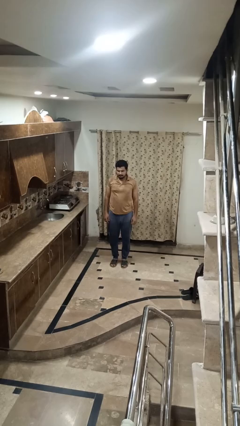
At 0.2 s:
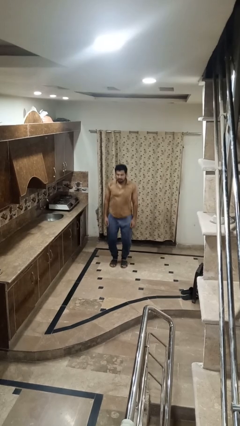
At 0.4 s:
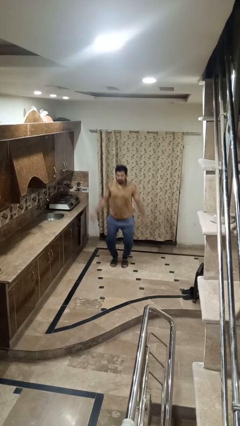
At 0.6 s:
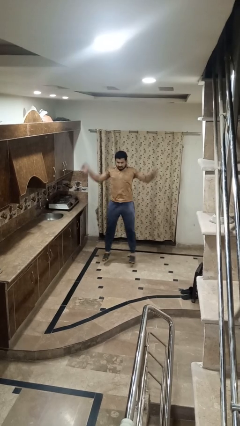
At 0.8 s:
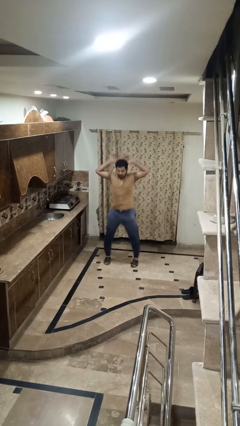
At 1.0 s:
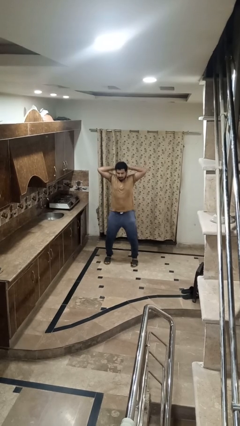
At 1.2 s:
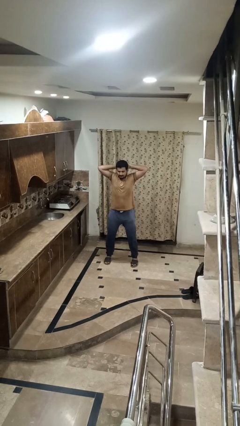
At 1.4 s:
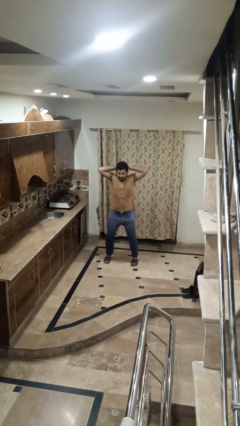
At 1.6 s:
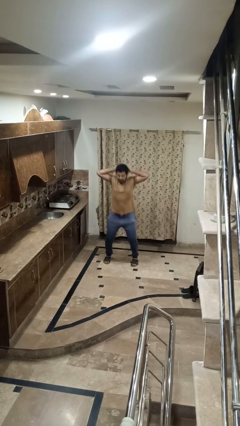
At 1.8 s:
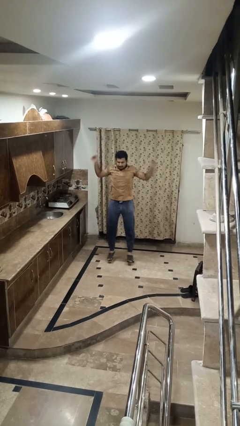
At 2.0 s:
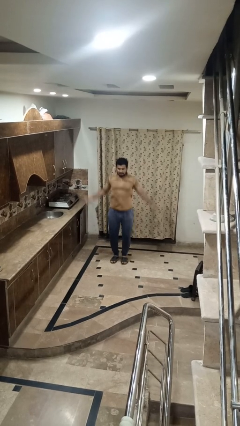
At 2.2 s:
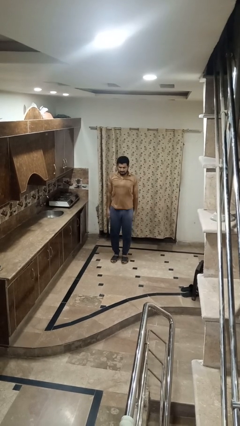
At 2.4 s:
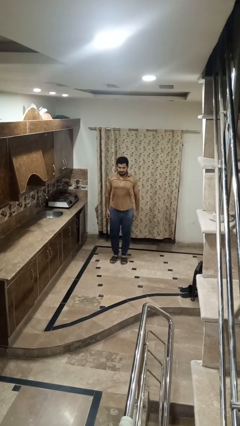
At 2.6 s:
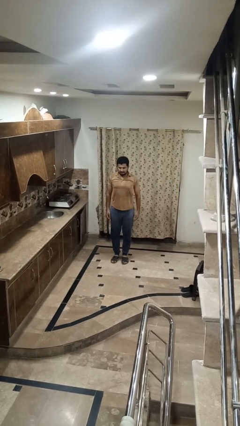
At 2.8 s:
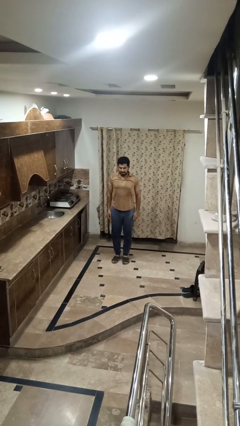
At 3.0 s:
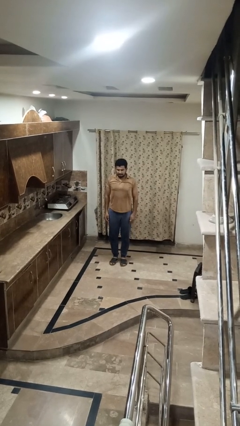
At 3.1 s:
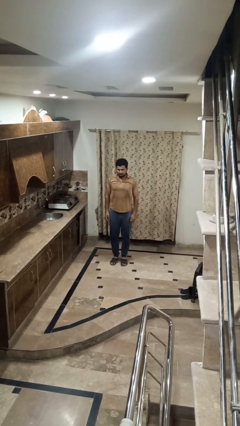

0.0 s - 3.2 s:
person exercises with jumping jacks

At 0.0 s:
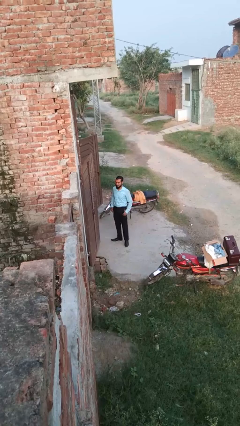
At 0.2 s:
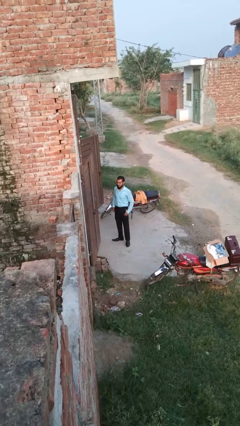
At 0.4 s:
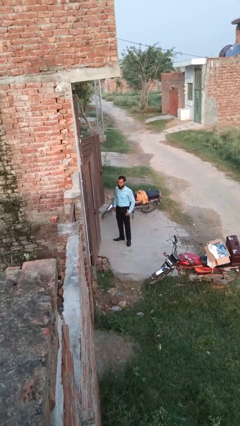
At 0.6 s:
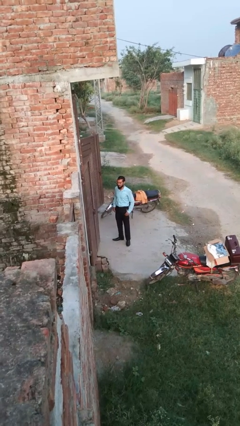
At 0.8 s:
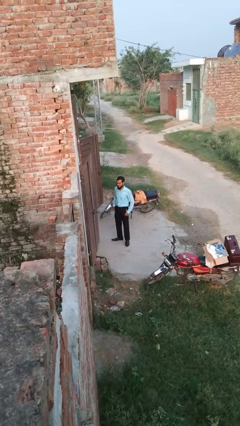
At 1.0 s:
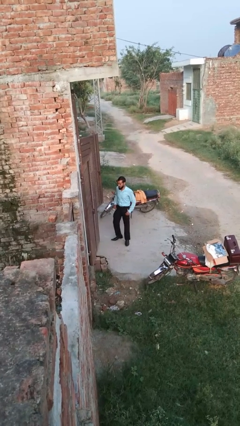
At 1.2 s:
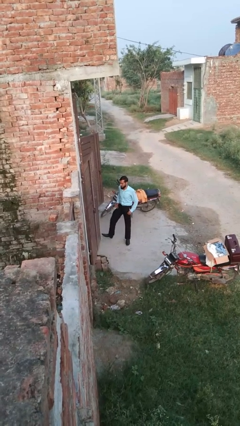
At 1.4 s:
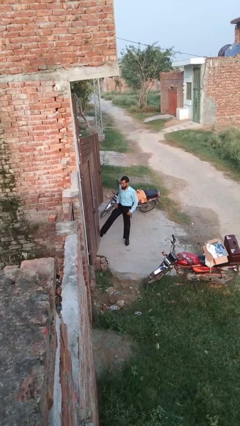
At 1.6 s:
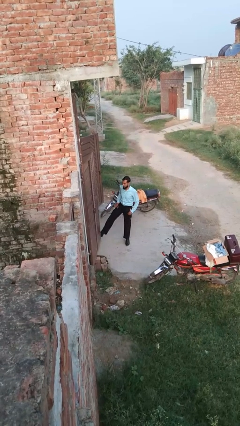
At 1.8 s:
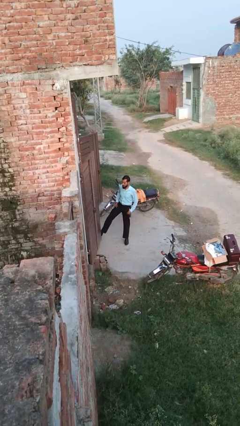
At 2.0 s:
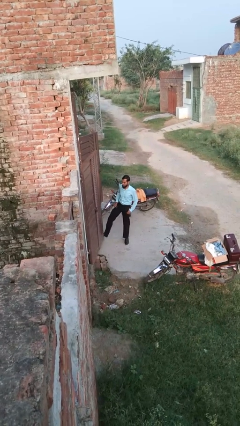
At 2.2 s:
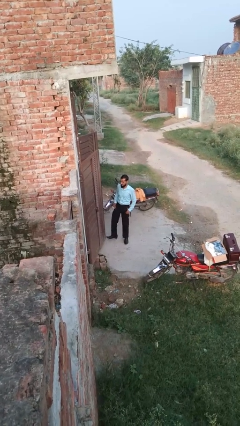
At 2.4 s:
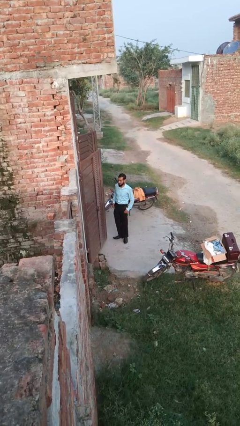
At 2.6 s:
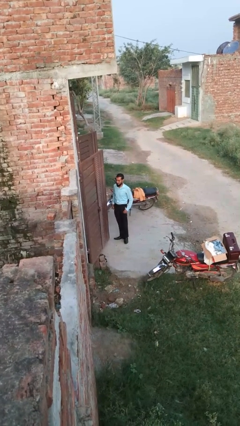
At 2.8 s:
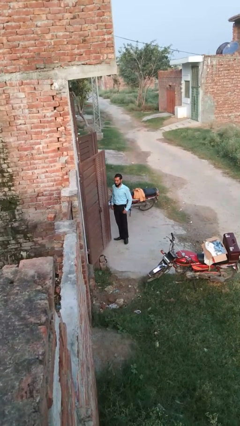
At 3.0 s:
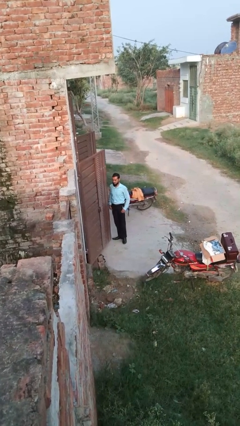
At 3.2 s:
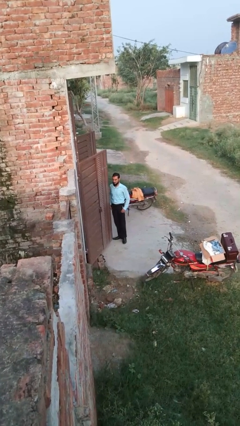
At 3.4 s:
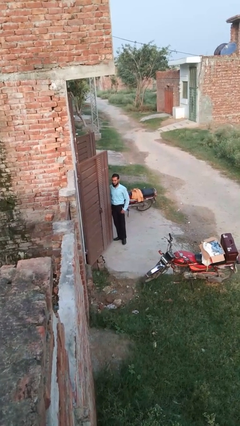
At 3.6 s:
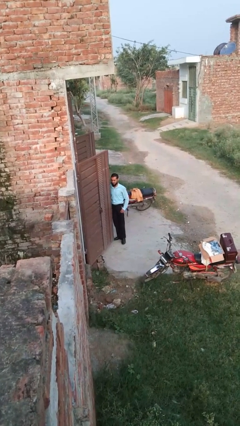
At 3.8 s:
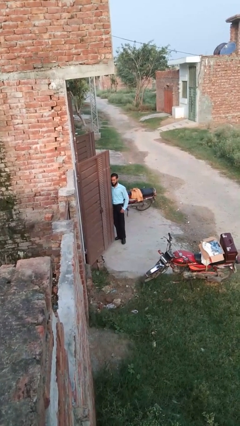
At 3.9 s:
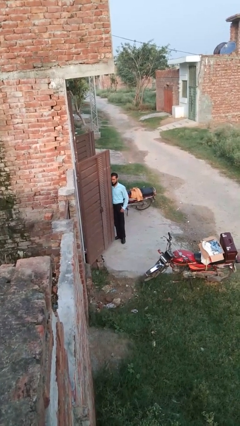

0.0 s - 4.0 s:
person opens facility door

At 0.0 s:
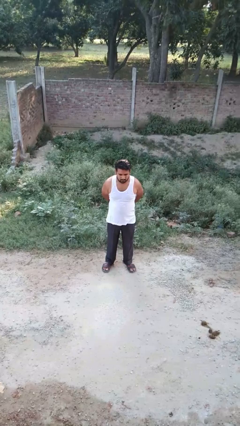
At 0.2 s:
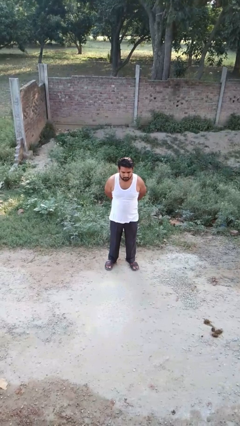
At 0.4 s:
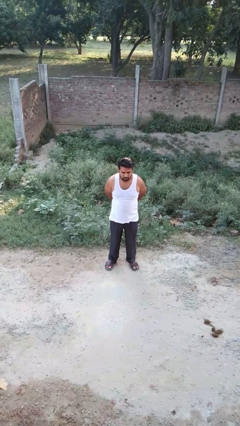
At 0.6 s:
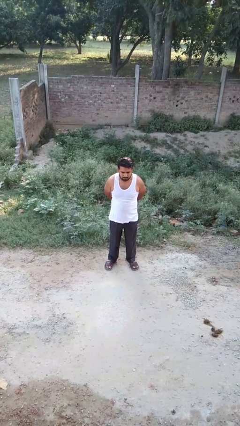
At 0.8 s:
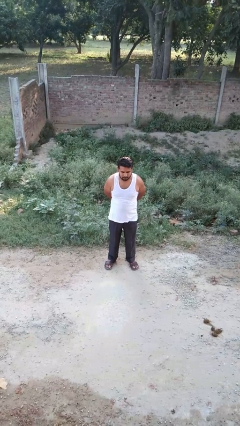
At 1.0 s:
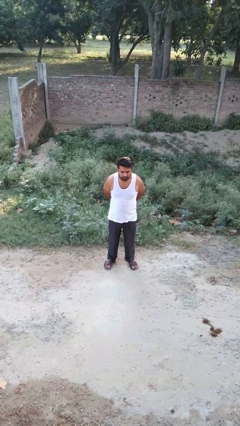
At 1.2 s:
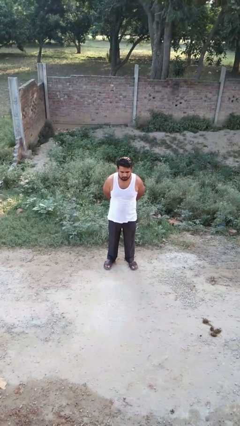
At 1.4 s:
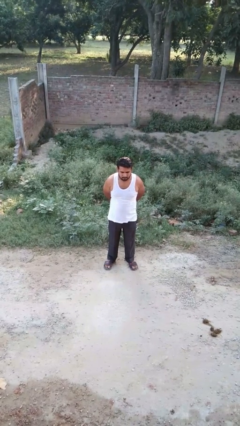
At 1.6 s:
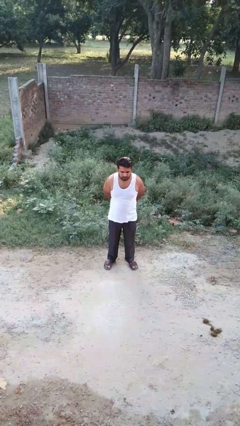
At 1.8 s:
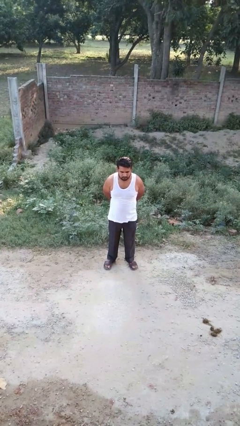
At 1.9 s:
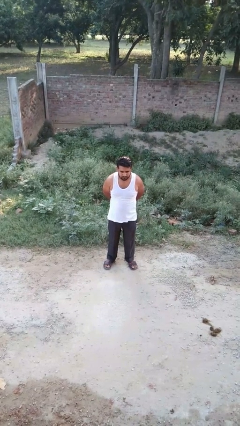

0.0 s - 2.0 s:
person stretches back

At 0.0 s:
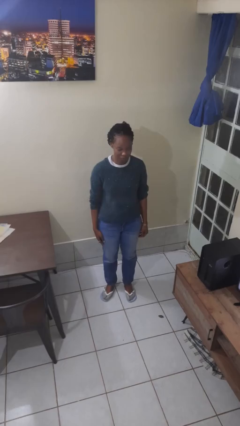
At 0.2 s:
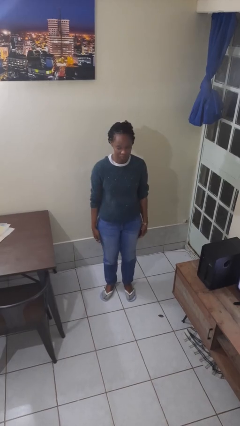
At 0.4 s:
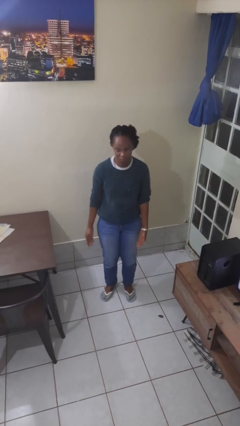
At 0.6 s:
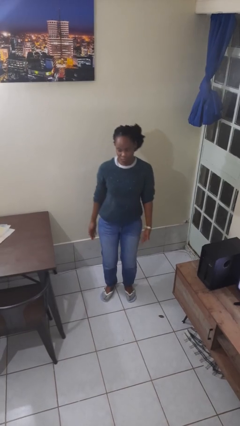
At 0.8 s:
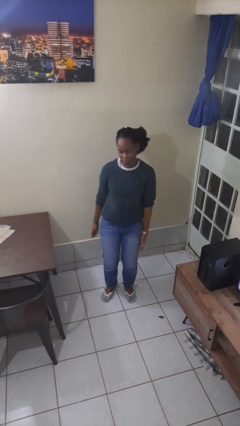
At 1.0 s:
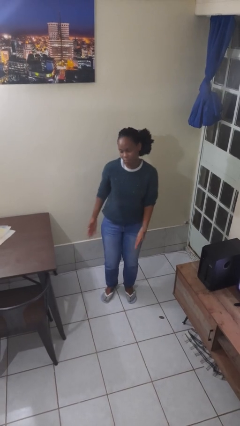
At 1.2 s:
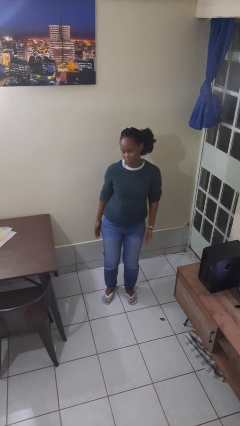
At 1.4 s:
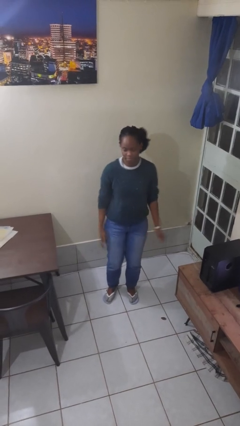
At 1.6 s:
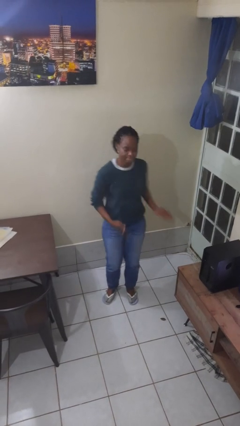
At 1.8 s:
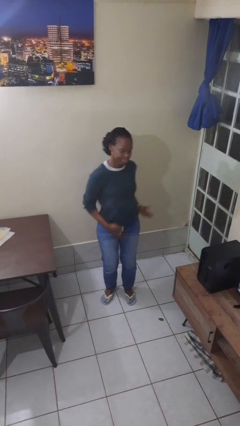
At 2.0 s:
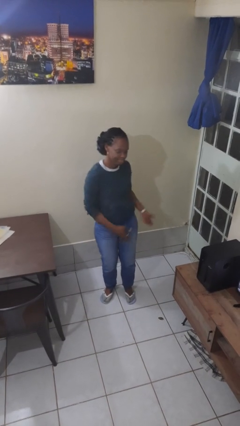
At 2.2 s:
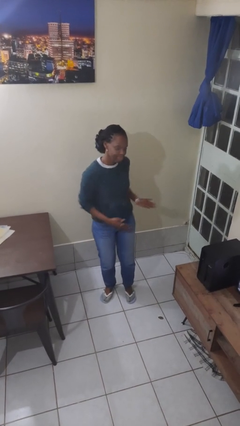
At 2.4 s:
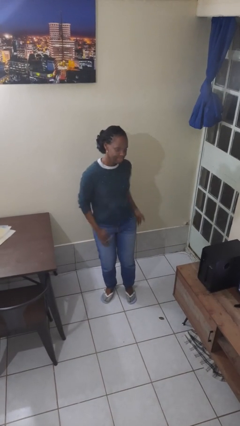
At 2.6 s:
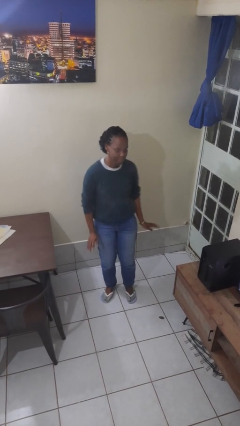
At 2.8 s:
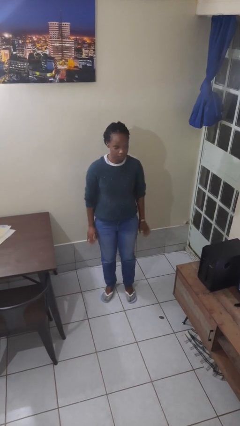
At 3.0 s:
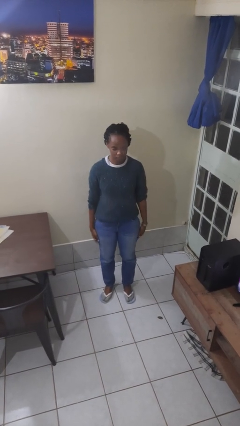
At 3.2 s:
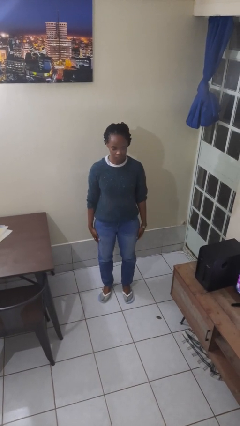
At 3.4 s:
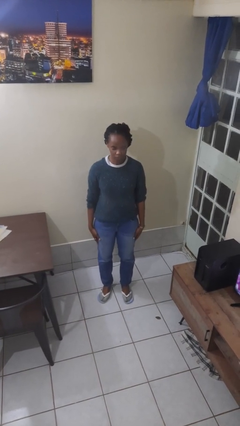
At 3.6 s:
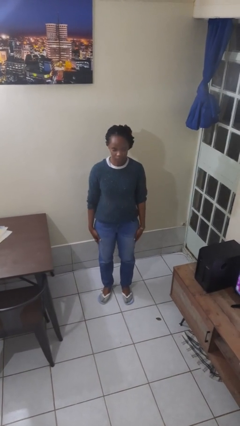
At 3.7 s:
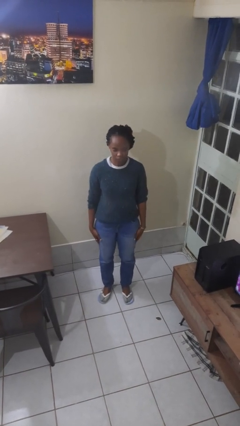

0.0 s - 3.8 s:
person dances in place

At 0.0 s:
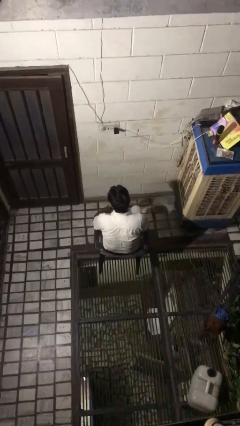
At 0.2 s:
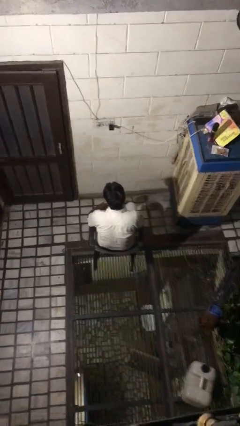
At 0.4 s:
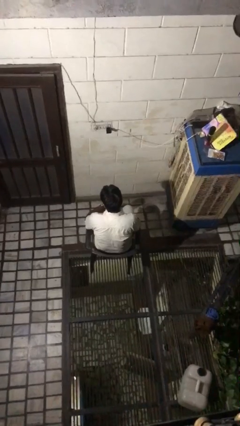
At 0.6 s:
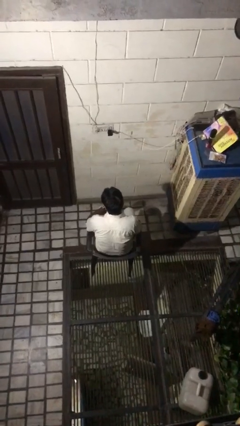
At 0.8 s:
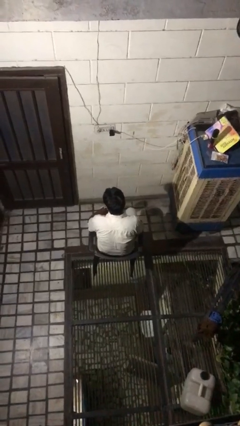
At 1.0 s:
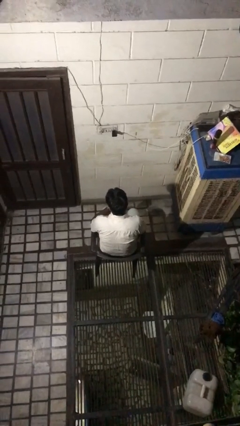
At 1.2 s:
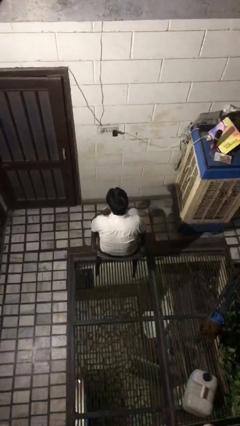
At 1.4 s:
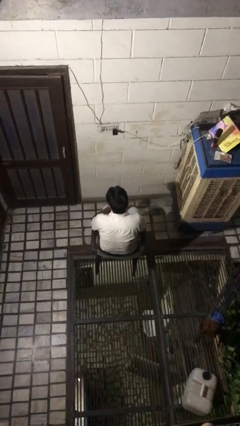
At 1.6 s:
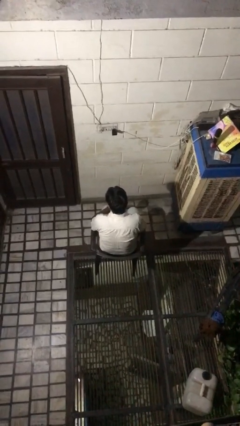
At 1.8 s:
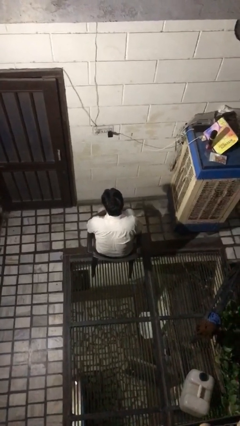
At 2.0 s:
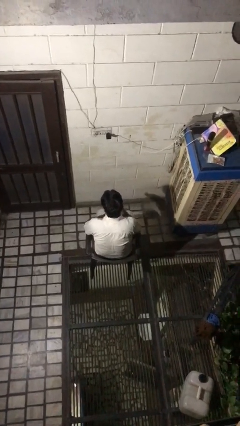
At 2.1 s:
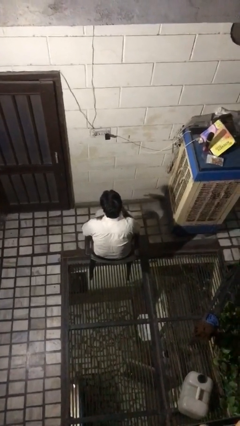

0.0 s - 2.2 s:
person takes off wristwatch

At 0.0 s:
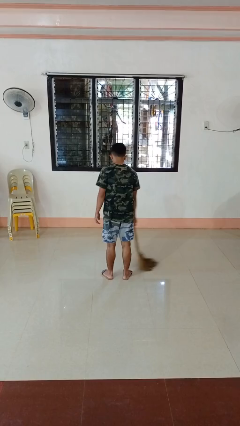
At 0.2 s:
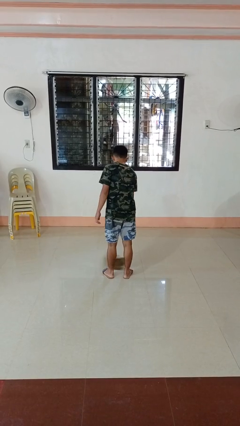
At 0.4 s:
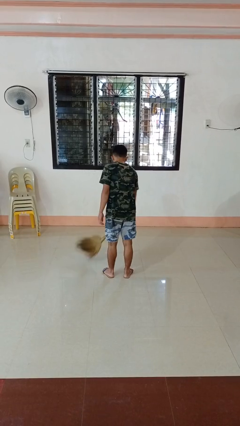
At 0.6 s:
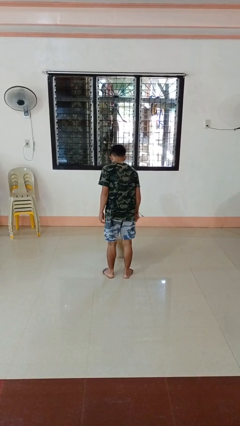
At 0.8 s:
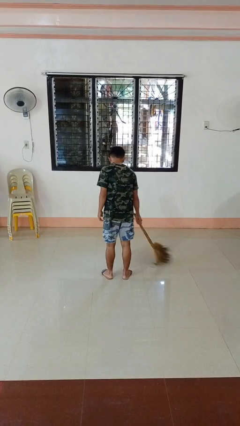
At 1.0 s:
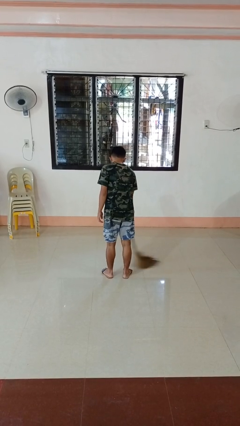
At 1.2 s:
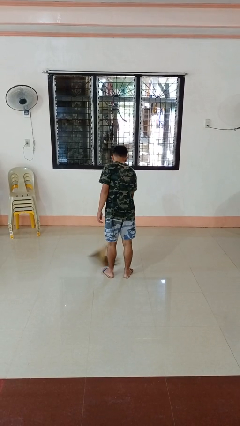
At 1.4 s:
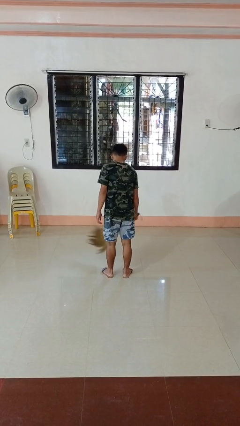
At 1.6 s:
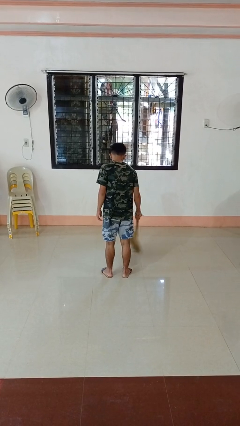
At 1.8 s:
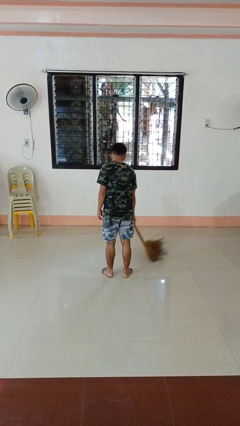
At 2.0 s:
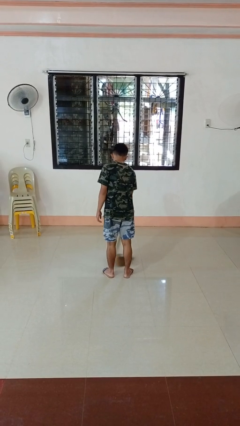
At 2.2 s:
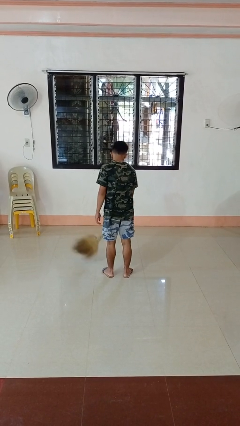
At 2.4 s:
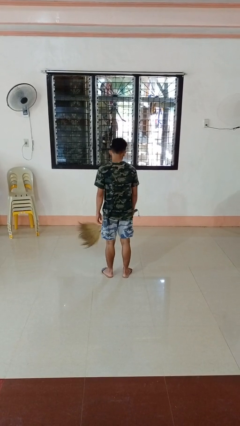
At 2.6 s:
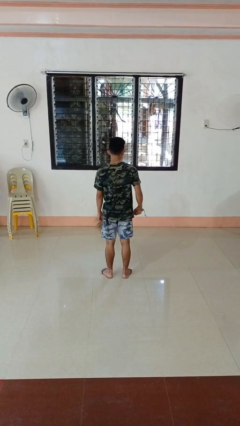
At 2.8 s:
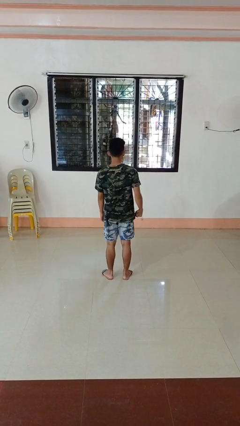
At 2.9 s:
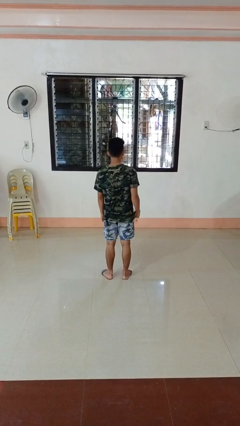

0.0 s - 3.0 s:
person sweeps floor
